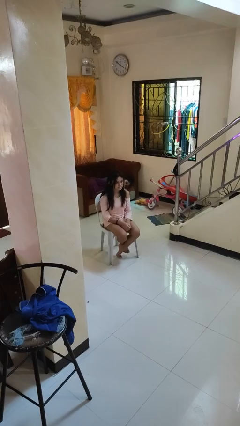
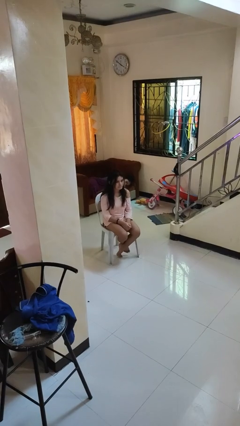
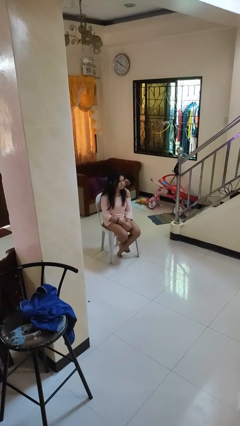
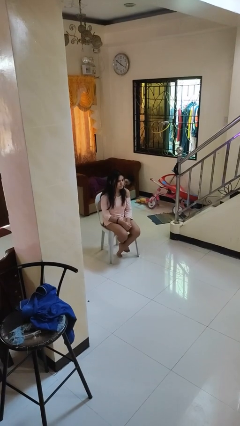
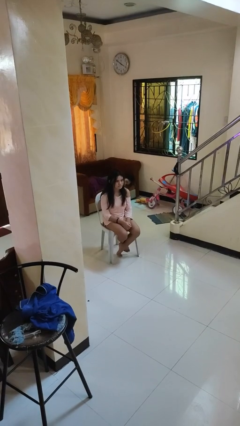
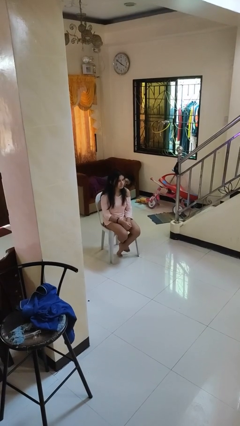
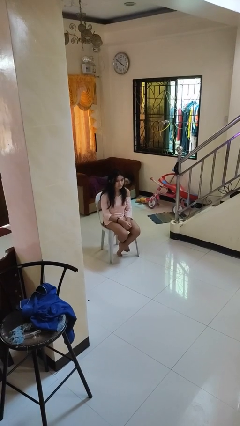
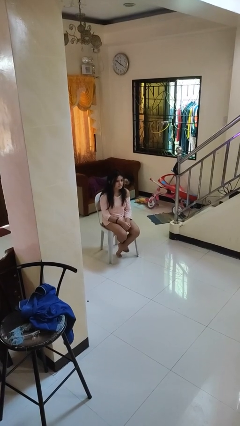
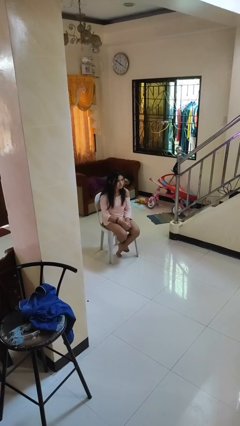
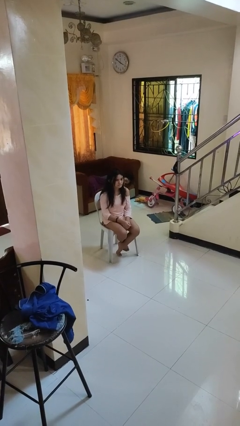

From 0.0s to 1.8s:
person shakes head

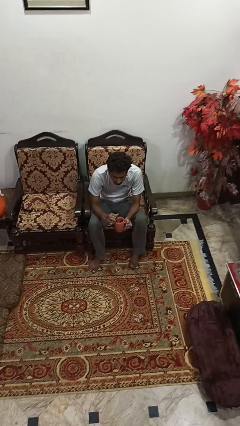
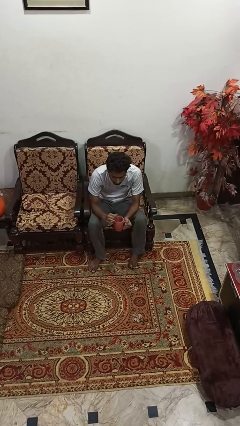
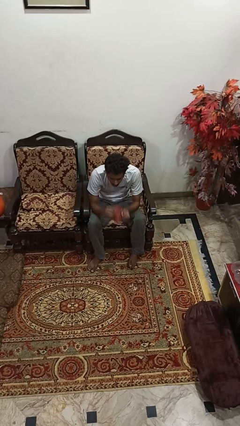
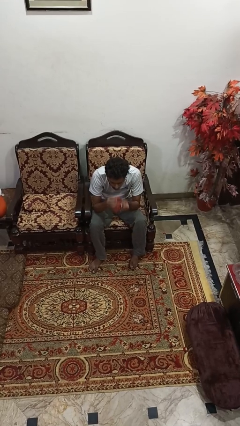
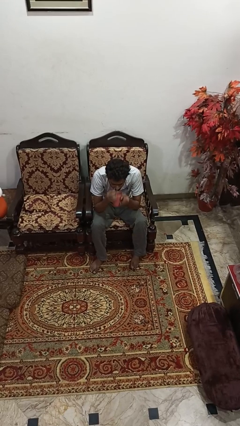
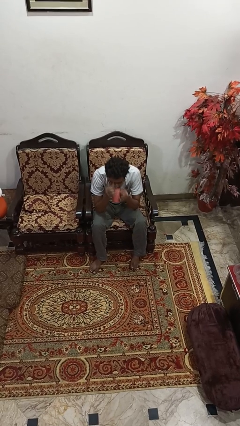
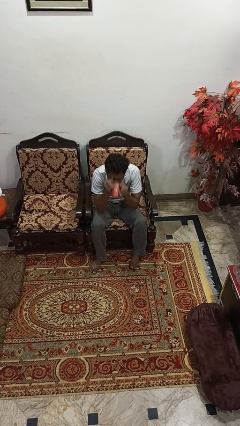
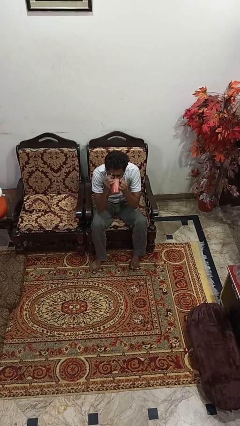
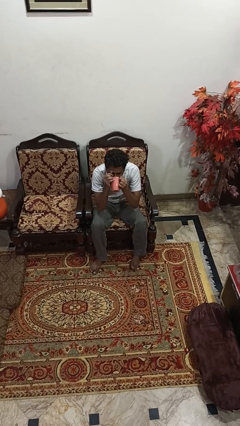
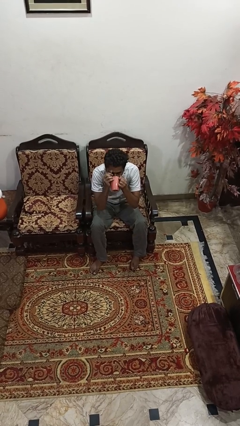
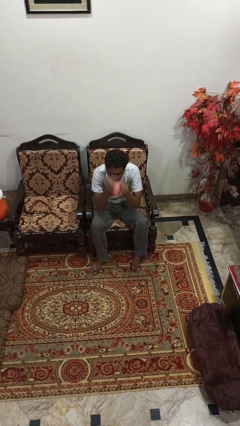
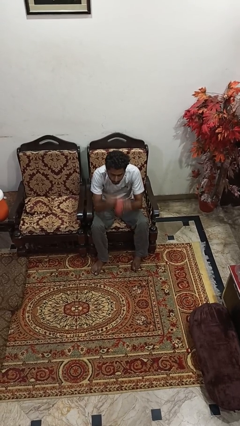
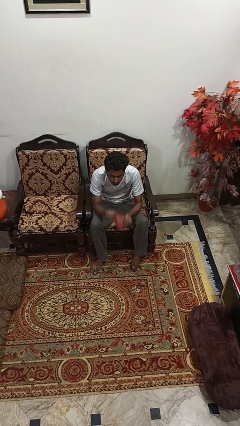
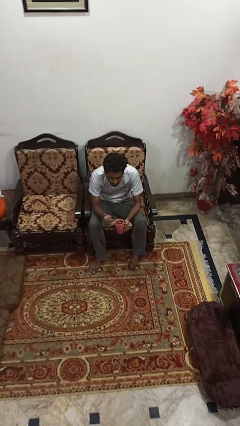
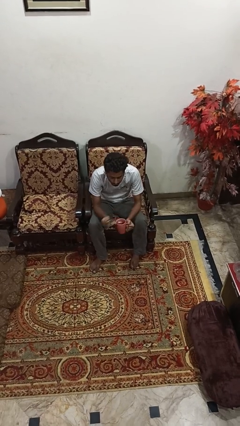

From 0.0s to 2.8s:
person drinks from mug

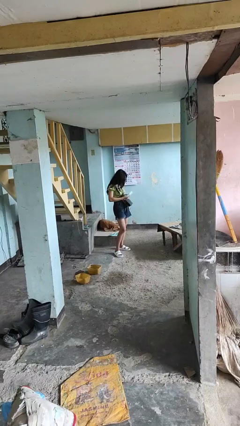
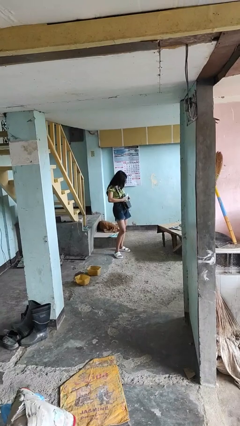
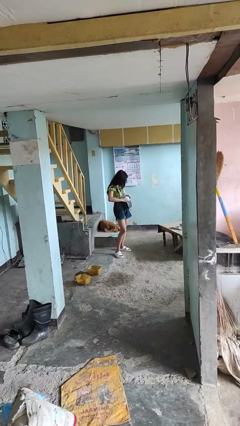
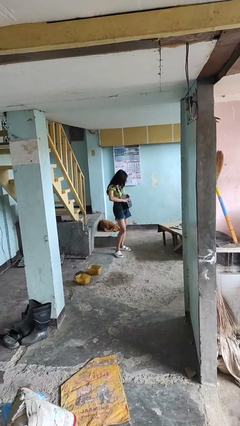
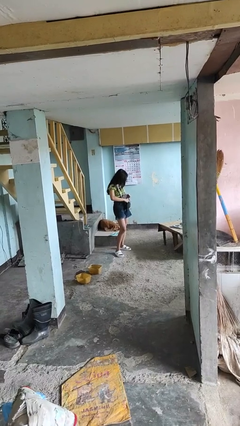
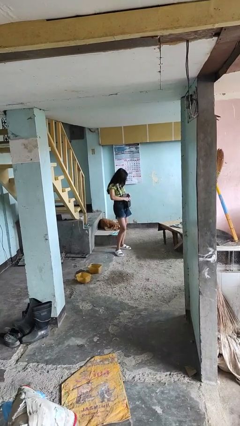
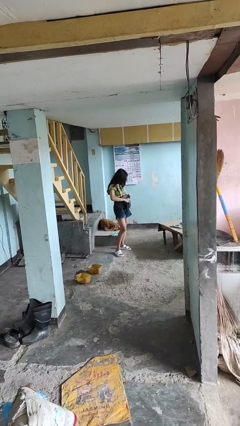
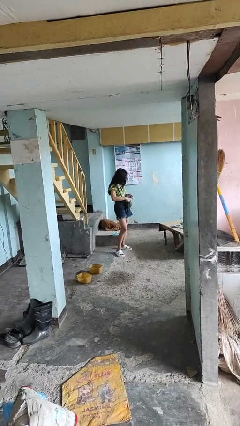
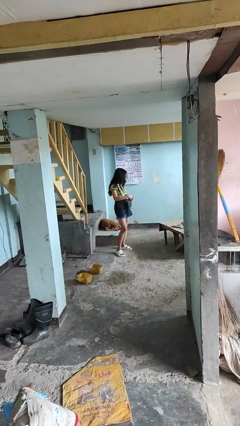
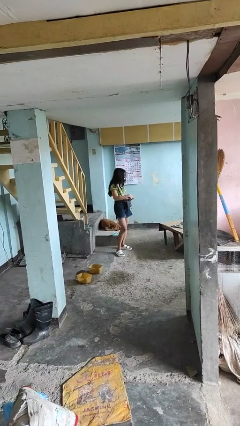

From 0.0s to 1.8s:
person puts object into purse

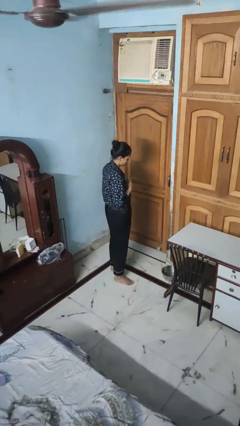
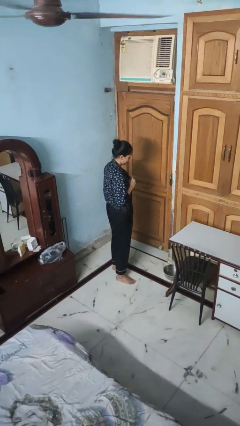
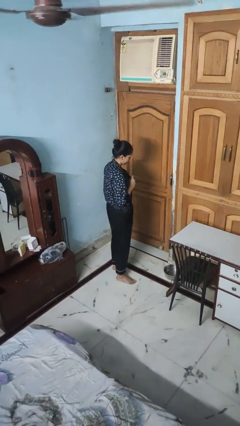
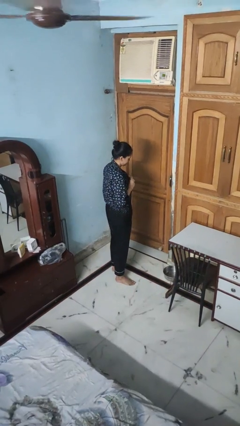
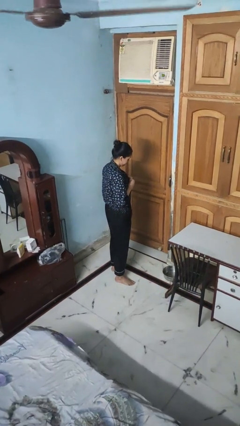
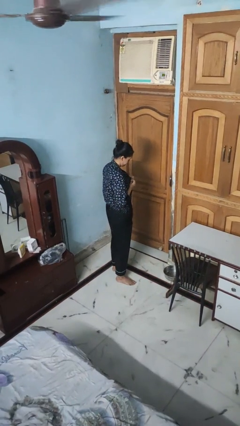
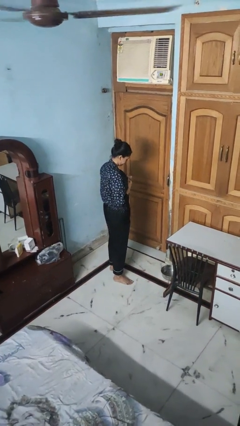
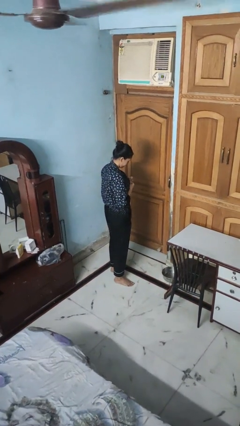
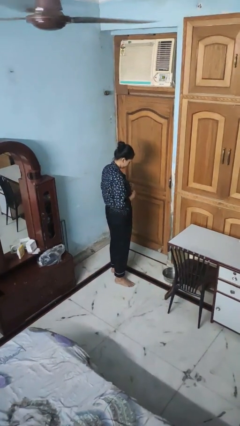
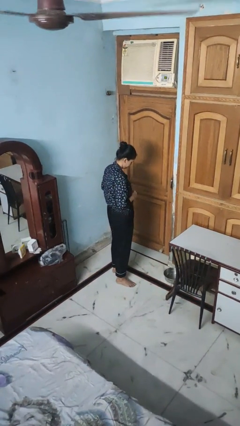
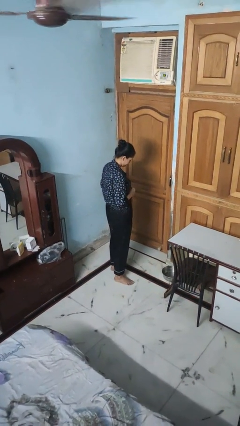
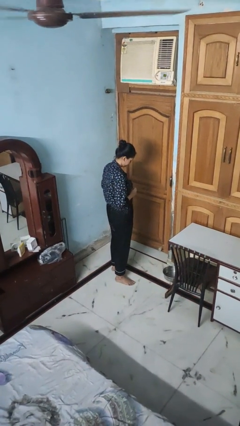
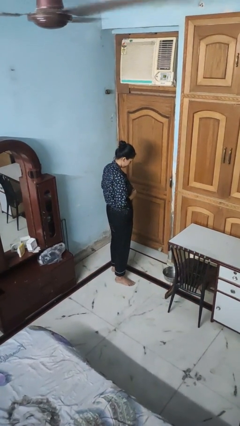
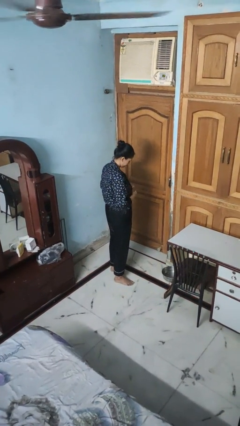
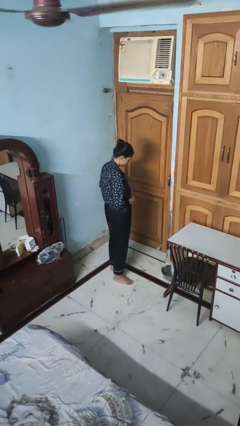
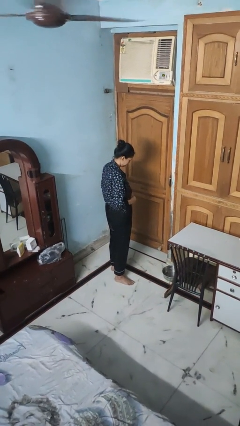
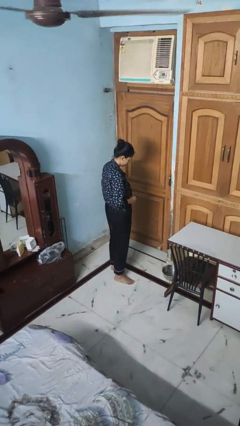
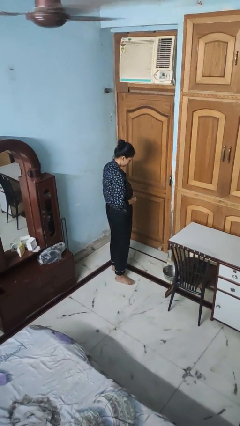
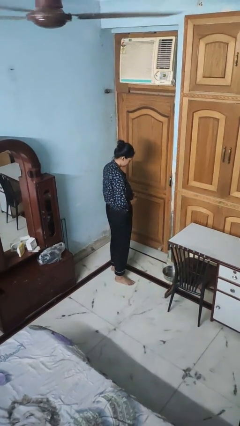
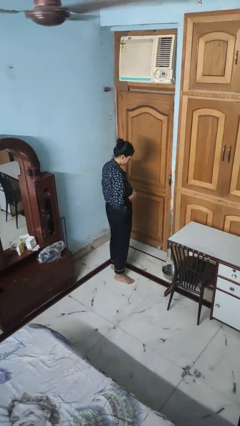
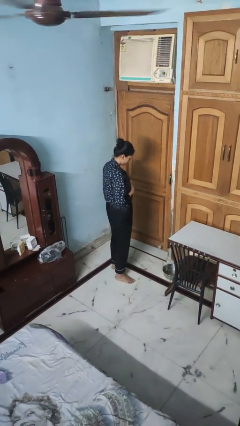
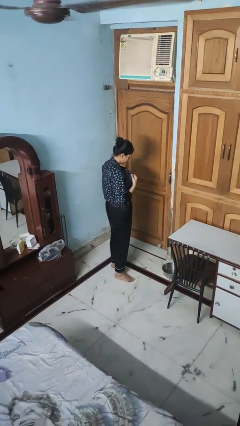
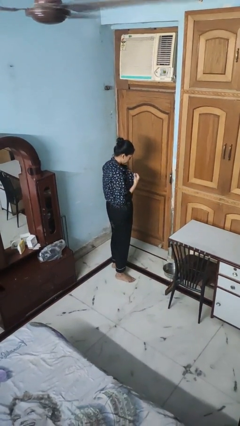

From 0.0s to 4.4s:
person unbuttons shirt

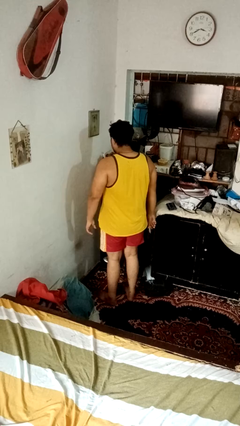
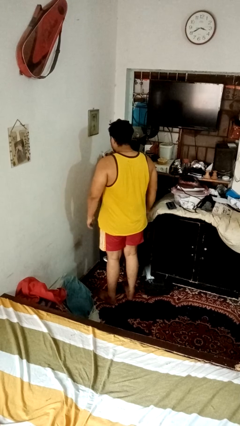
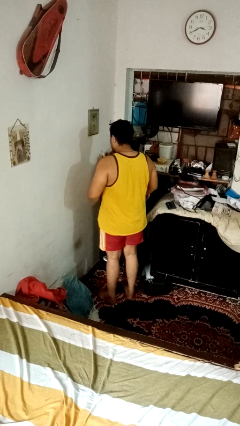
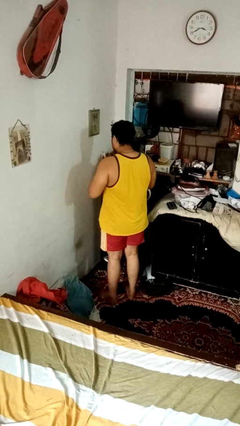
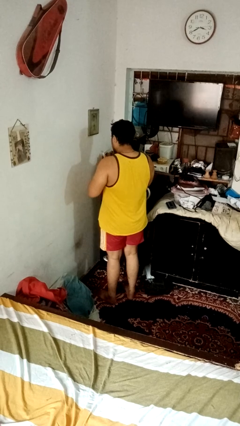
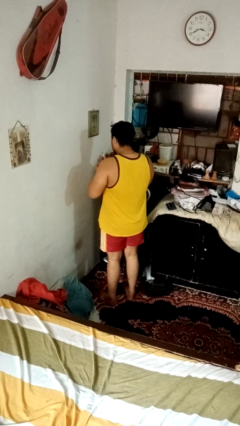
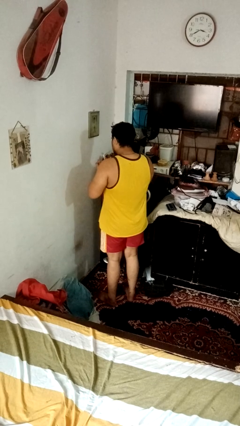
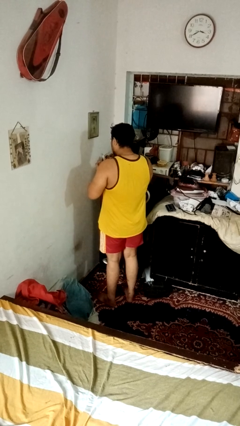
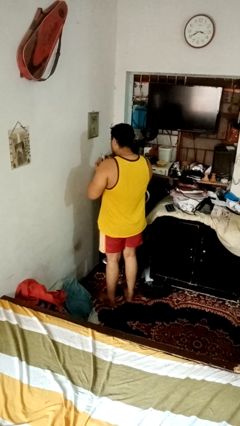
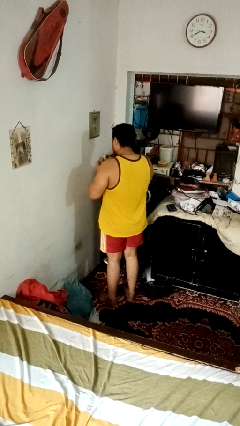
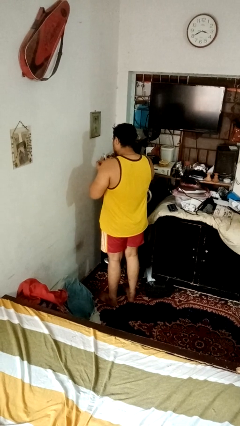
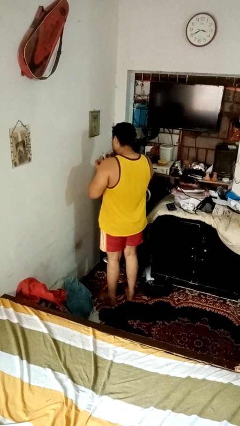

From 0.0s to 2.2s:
person clips fingernails

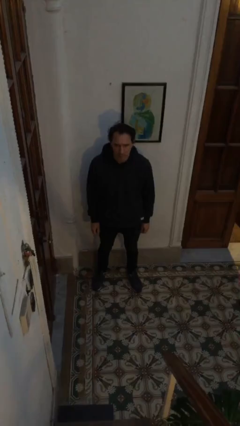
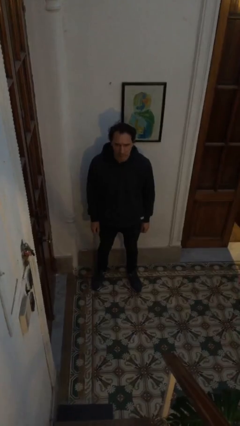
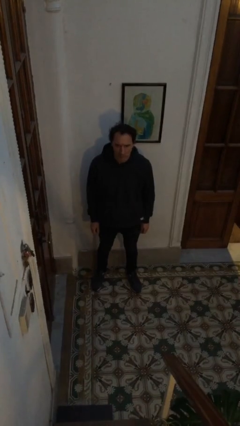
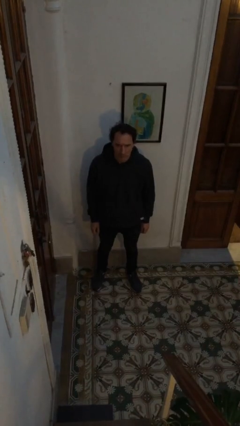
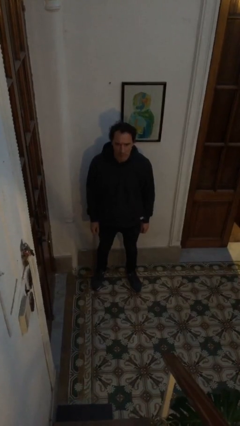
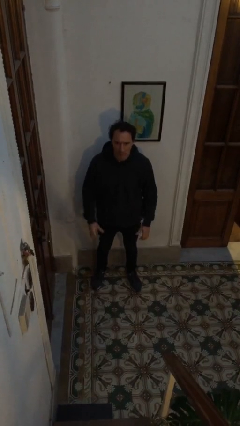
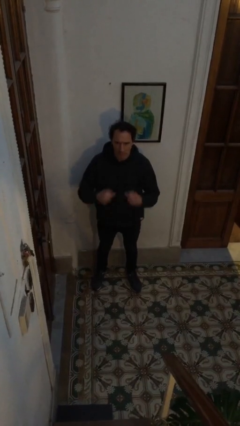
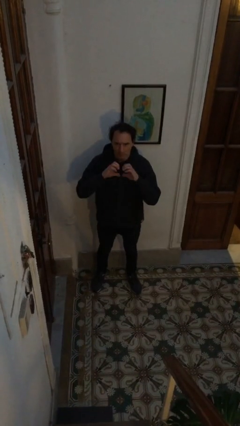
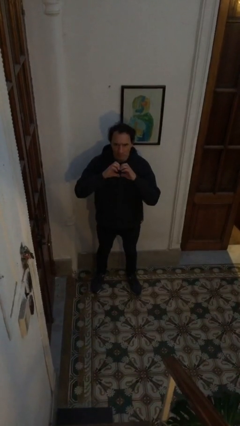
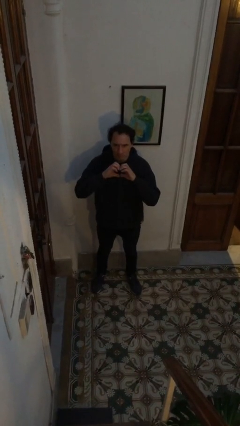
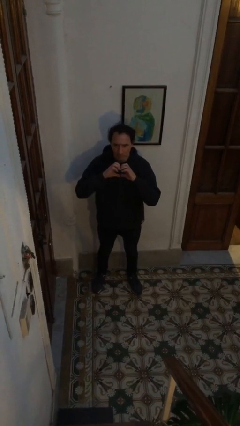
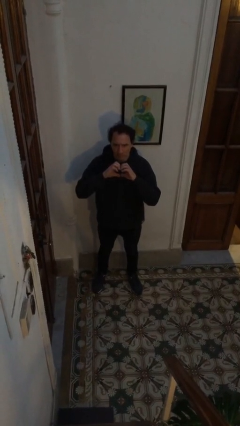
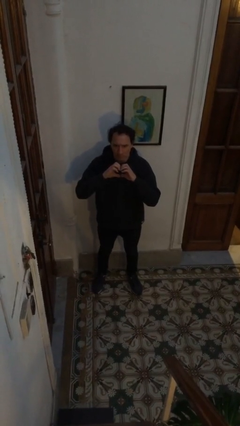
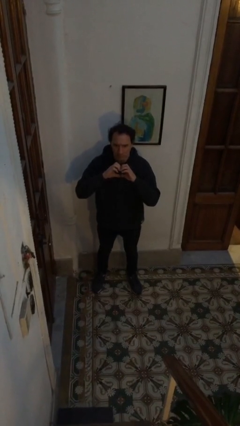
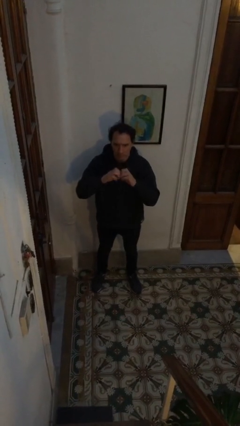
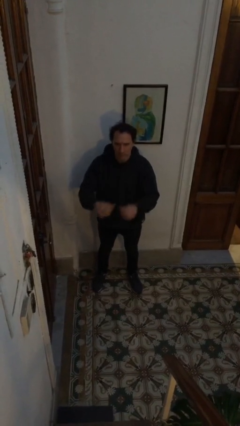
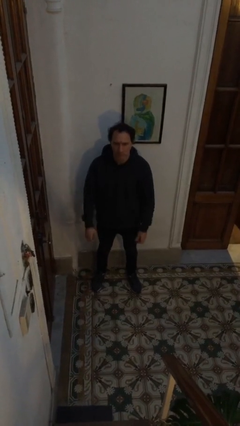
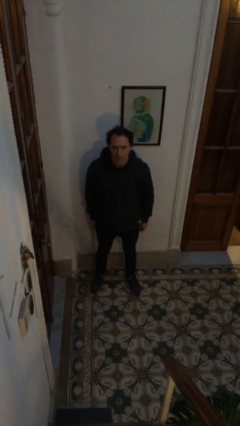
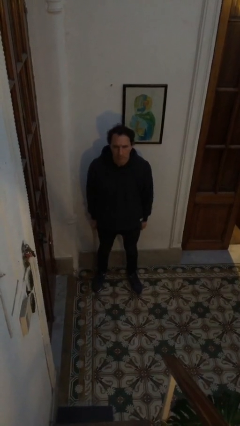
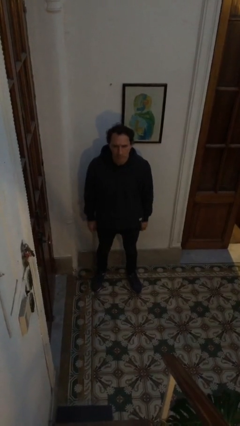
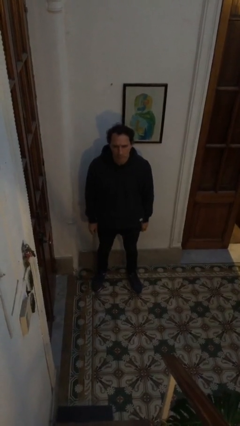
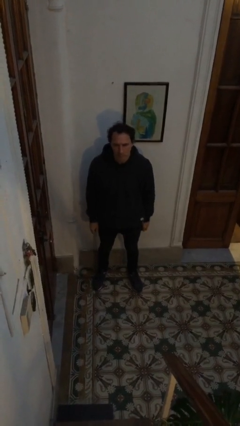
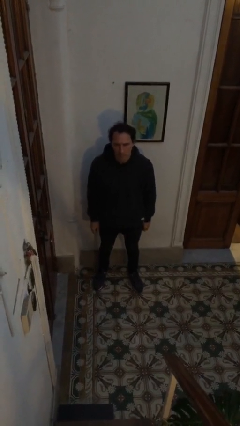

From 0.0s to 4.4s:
person gestures heart

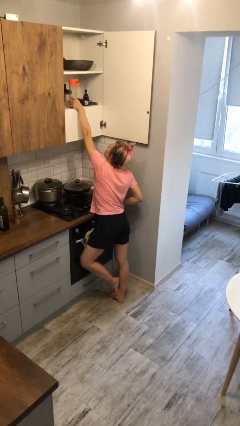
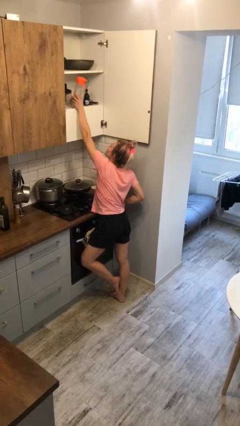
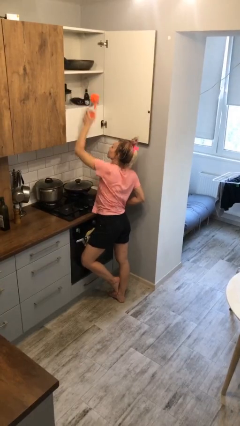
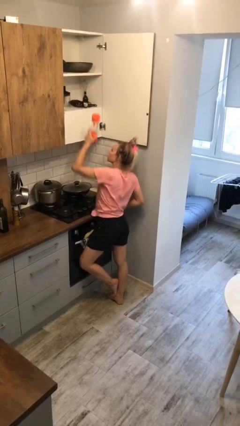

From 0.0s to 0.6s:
person picks up object from cabinet
